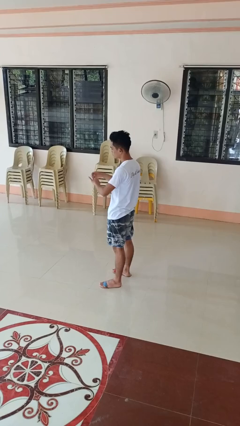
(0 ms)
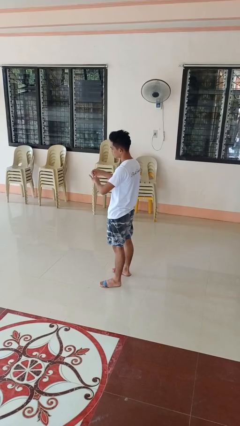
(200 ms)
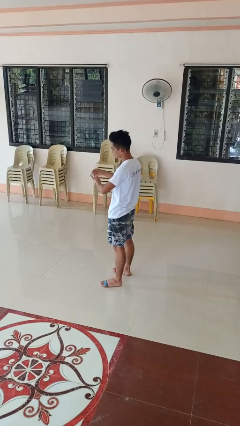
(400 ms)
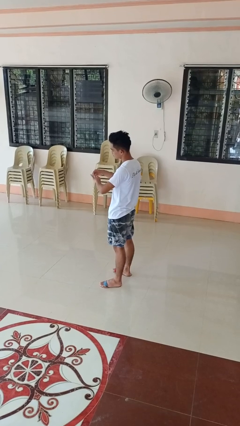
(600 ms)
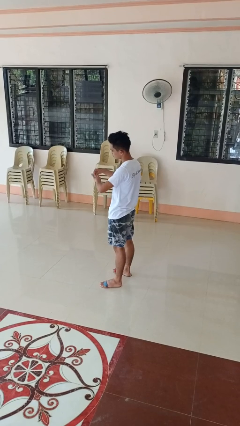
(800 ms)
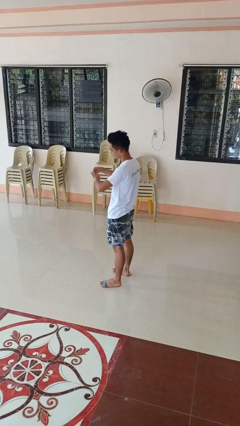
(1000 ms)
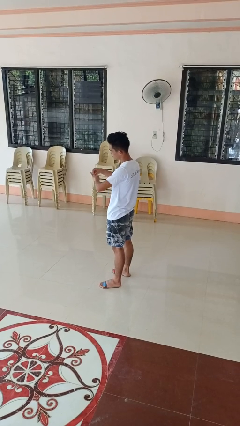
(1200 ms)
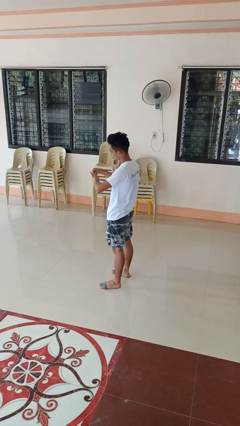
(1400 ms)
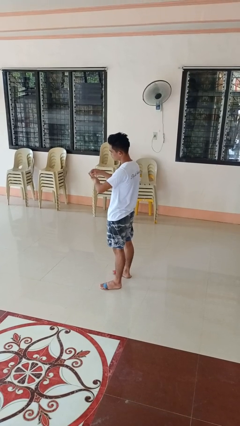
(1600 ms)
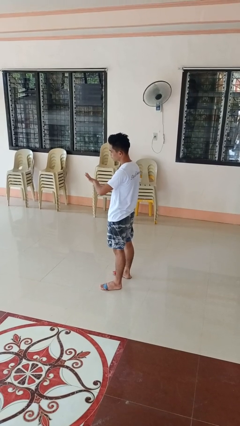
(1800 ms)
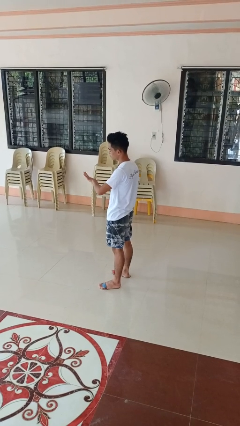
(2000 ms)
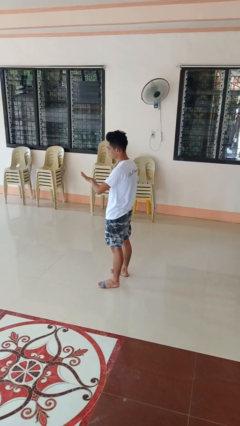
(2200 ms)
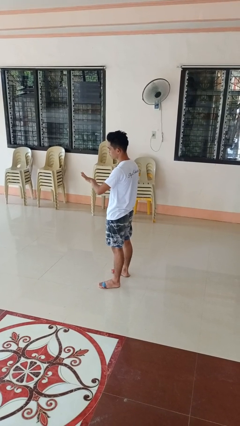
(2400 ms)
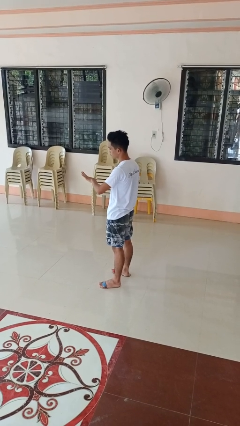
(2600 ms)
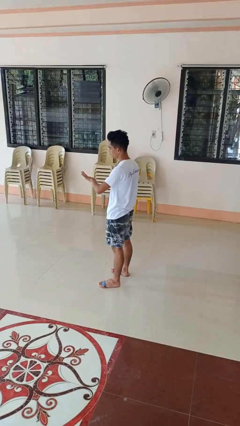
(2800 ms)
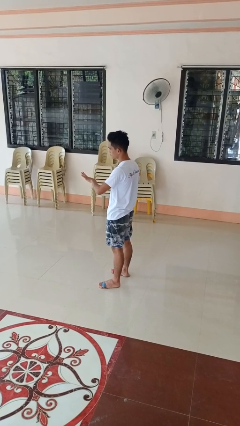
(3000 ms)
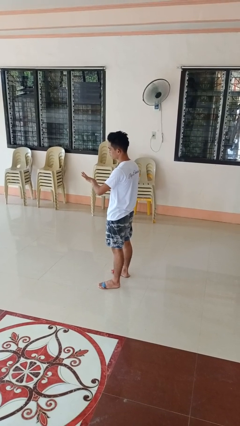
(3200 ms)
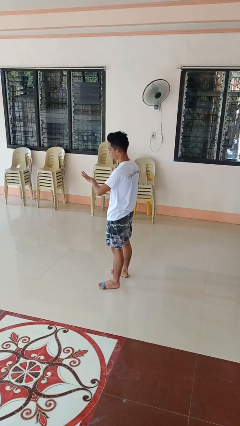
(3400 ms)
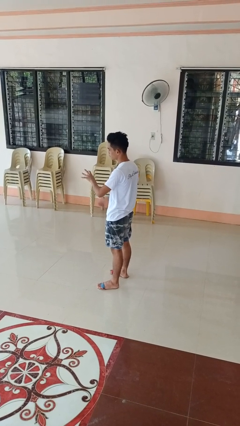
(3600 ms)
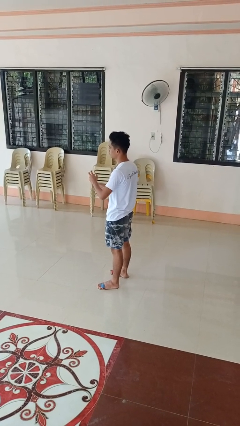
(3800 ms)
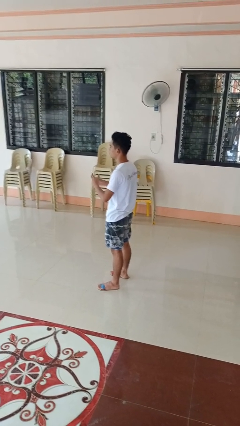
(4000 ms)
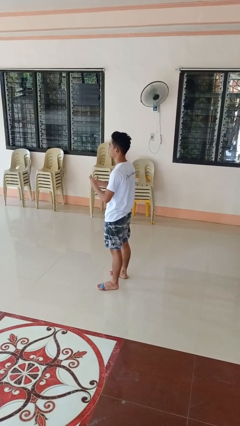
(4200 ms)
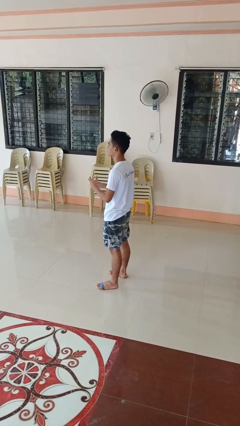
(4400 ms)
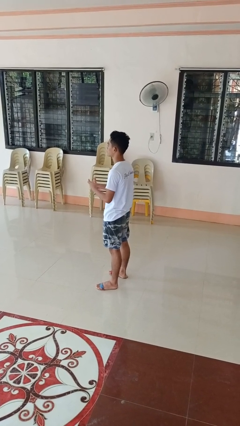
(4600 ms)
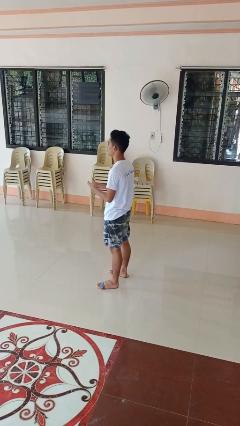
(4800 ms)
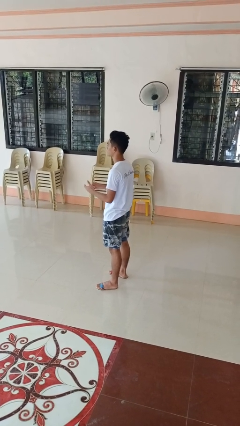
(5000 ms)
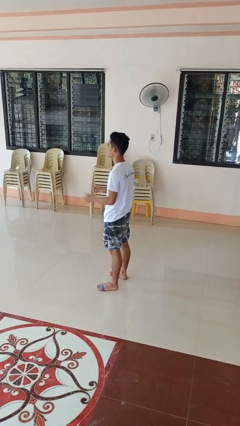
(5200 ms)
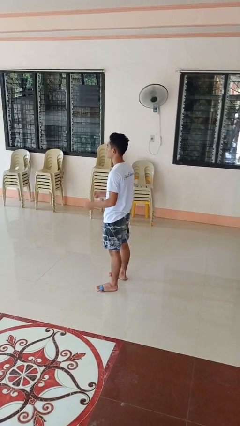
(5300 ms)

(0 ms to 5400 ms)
person puts on ring

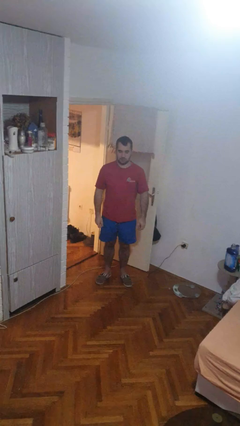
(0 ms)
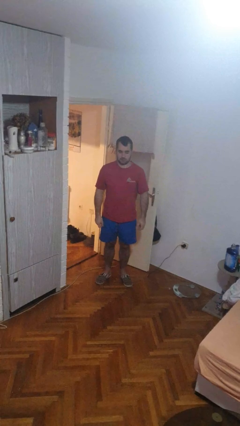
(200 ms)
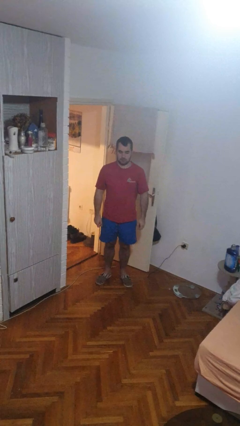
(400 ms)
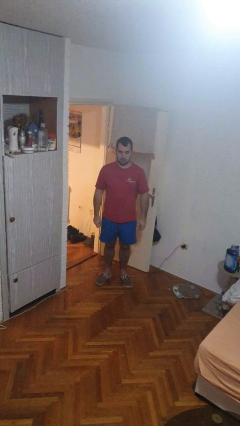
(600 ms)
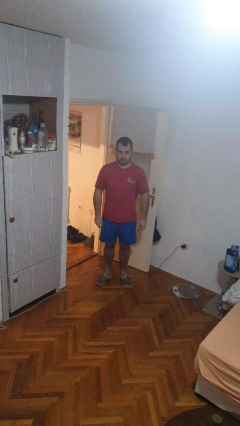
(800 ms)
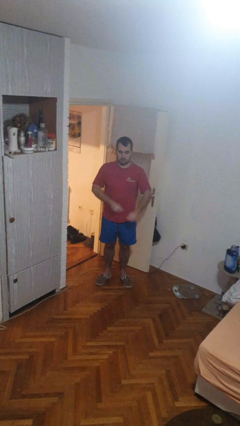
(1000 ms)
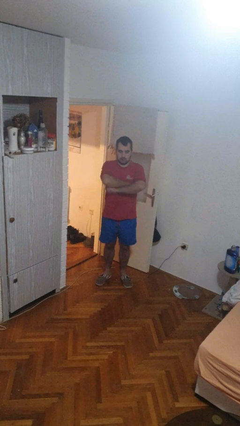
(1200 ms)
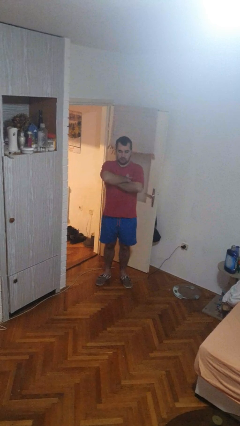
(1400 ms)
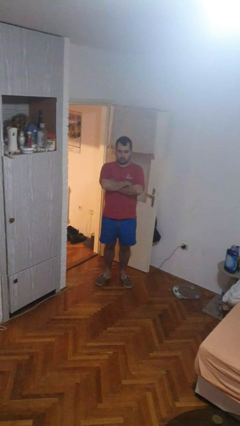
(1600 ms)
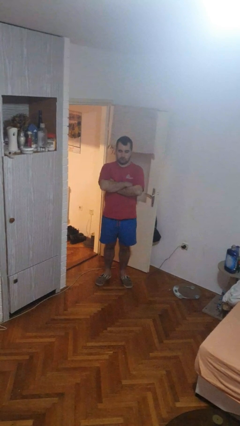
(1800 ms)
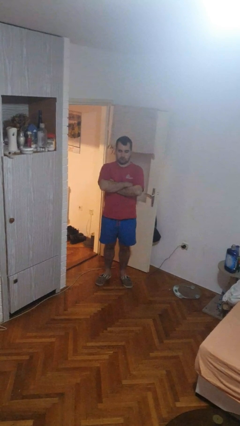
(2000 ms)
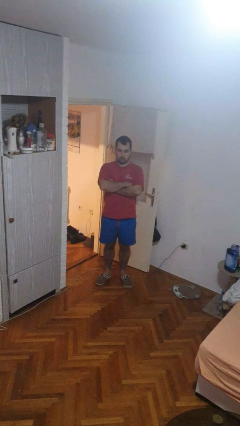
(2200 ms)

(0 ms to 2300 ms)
person crosses arms

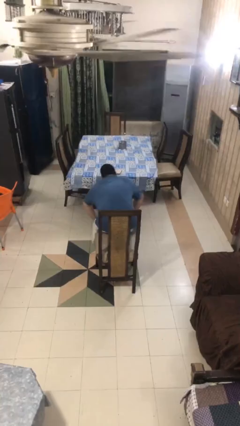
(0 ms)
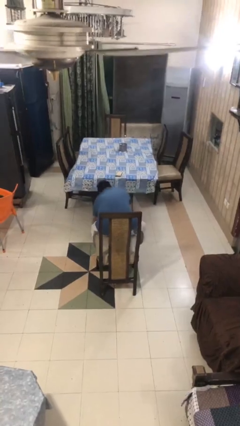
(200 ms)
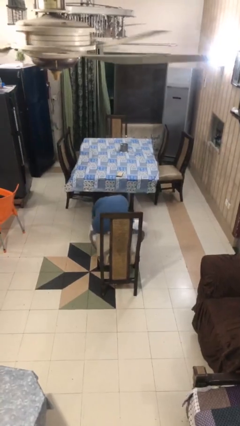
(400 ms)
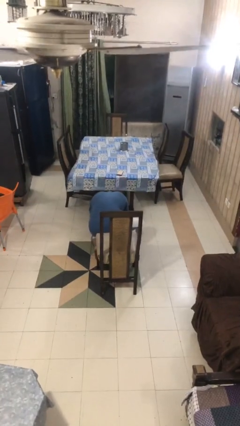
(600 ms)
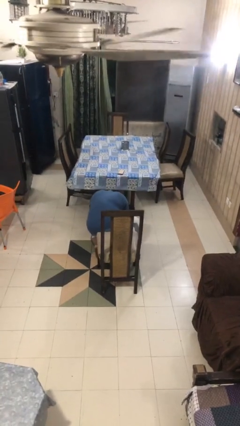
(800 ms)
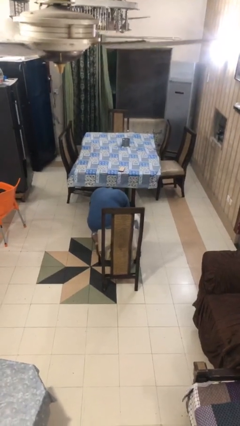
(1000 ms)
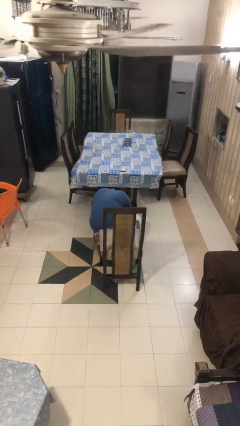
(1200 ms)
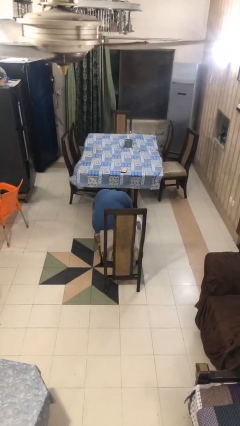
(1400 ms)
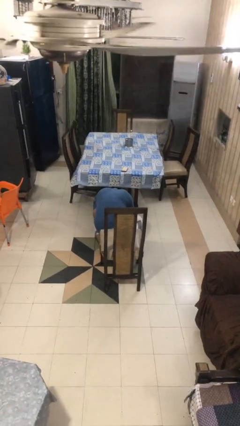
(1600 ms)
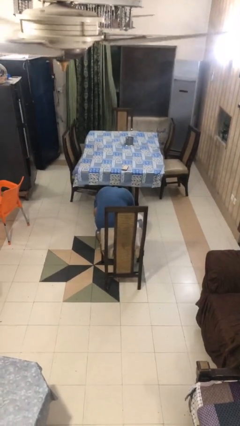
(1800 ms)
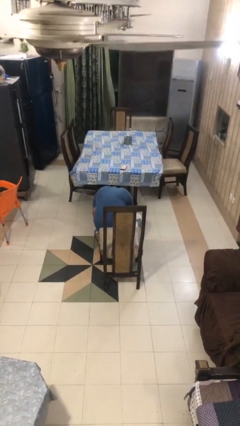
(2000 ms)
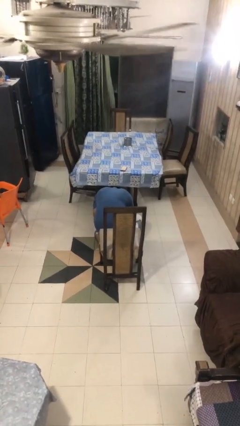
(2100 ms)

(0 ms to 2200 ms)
person falls from chair

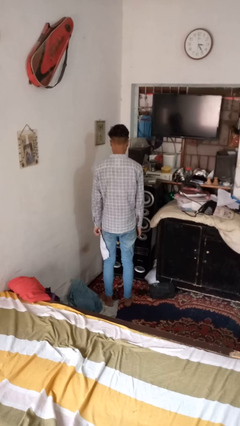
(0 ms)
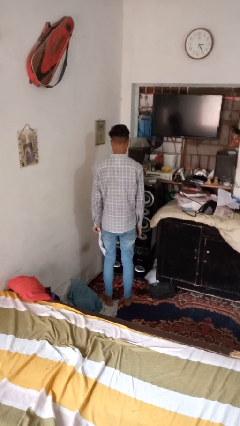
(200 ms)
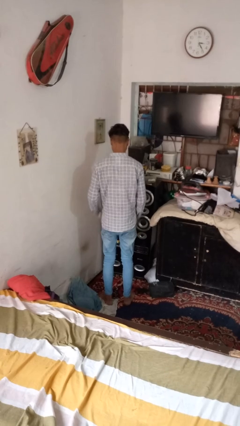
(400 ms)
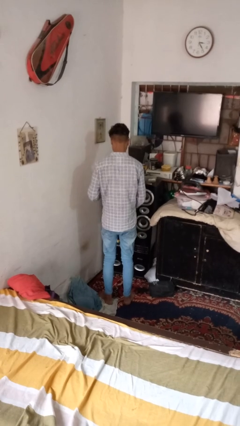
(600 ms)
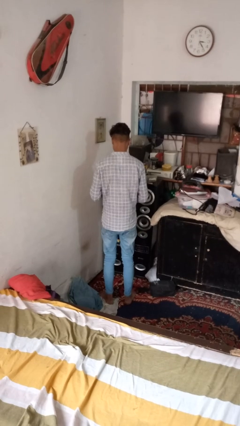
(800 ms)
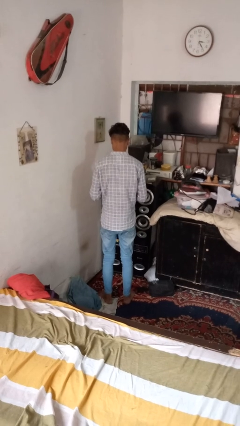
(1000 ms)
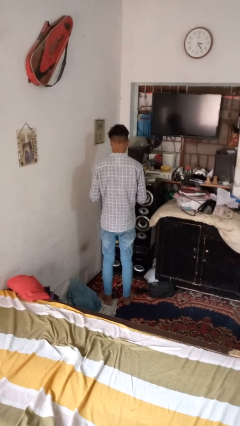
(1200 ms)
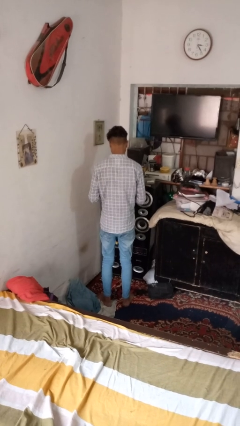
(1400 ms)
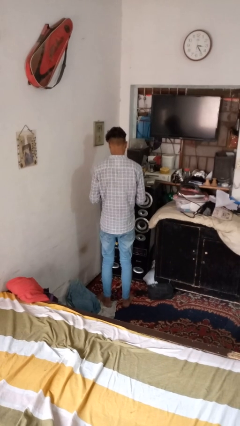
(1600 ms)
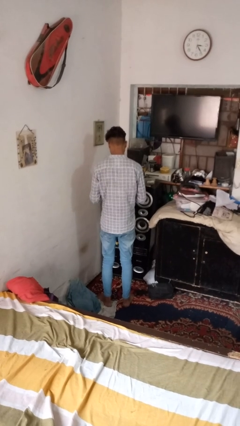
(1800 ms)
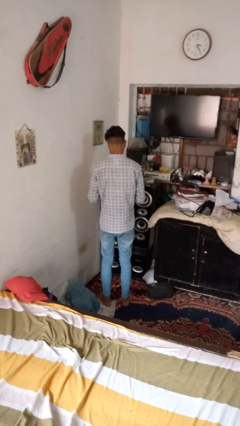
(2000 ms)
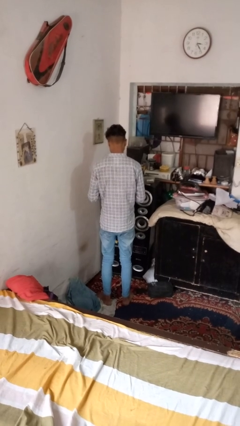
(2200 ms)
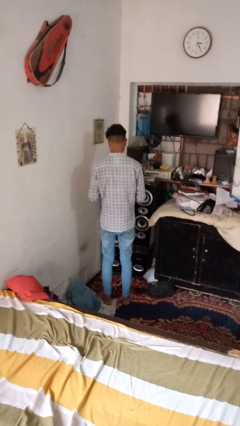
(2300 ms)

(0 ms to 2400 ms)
person crumples paper

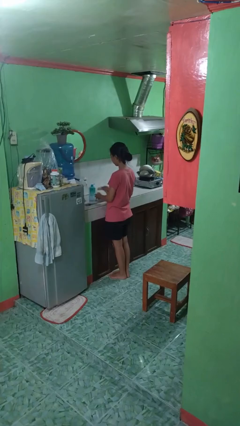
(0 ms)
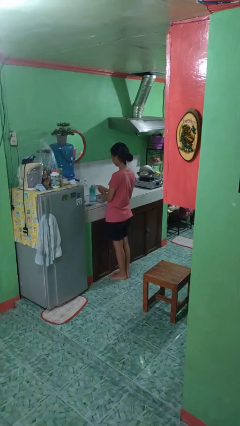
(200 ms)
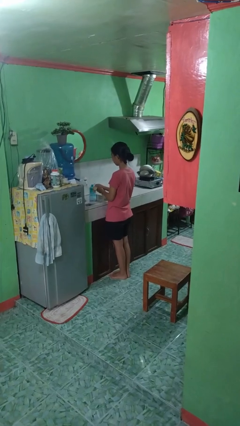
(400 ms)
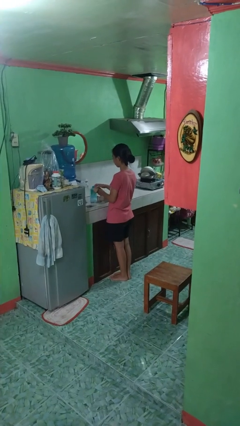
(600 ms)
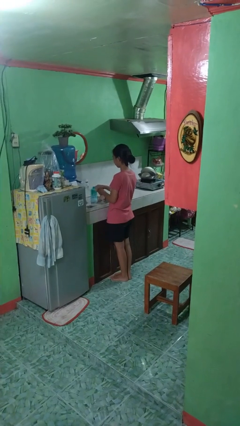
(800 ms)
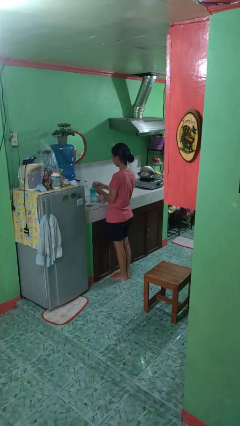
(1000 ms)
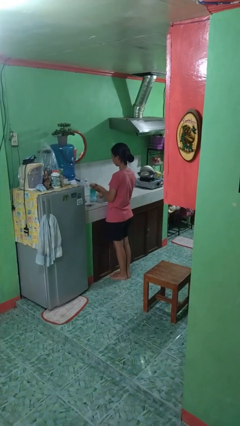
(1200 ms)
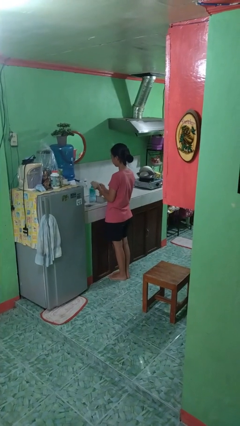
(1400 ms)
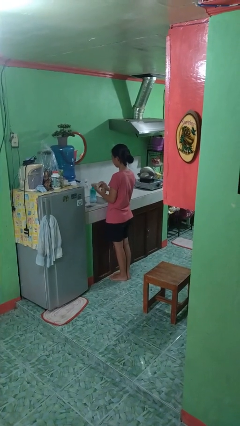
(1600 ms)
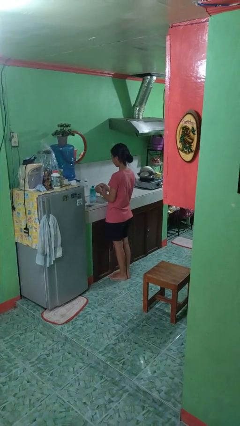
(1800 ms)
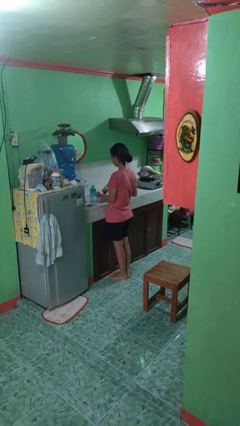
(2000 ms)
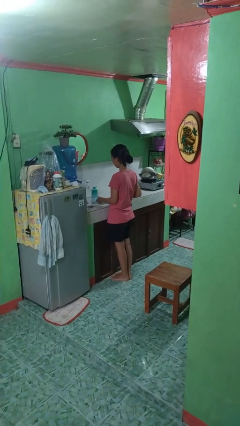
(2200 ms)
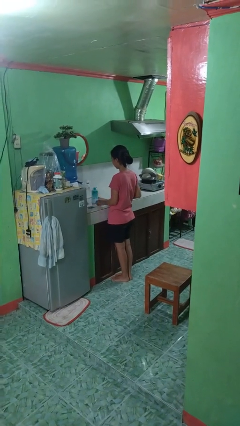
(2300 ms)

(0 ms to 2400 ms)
person dries hands with towel

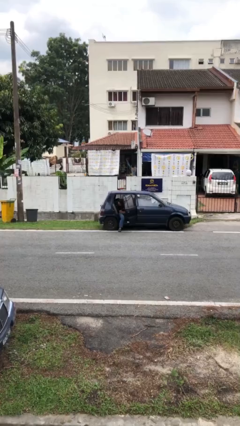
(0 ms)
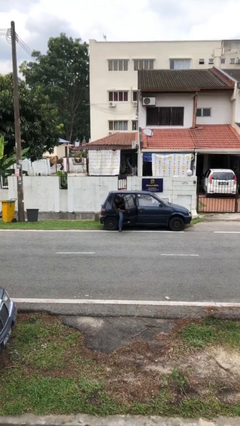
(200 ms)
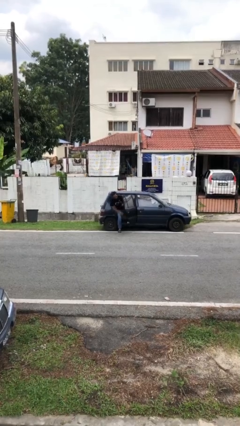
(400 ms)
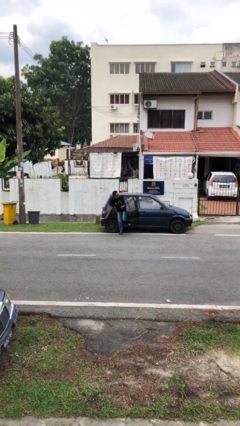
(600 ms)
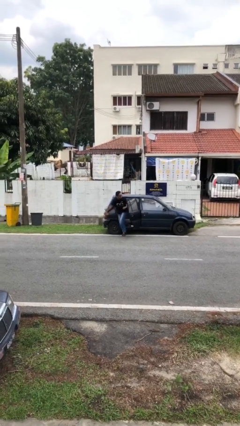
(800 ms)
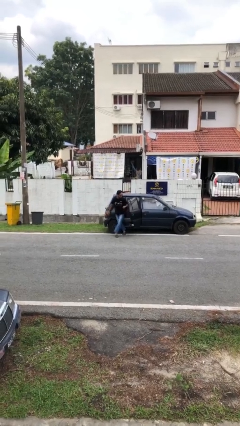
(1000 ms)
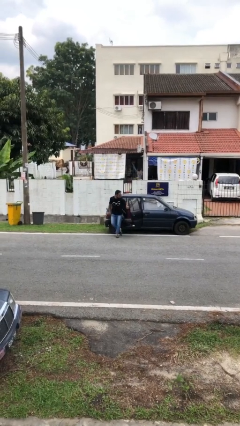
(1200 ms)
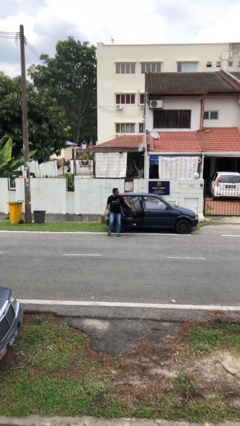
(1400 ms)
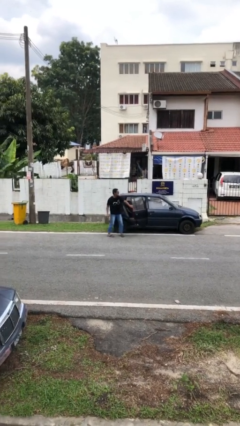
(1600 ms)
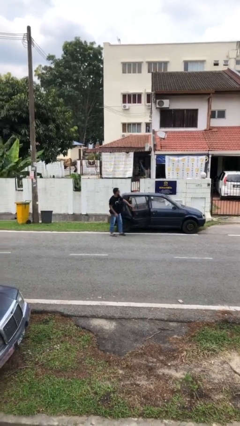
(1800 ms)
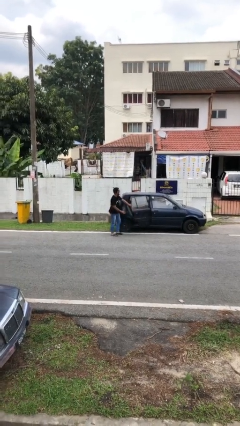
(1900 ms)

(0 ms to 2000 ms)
person exits car

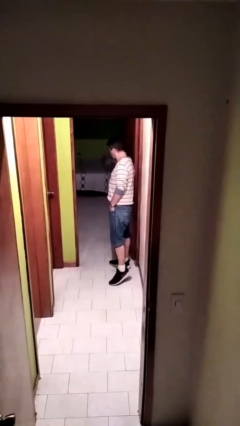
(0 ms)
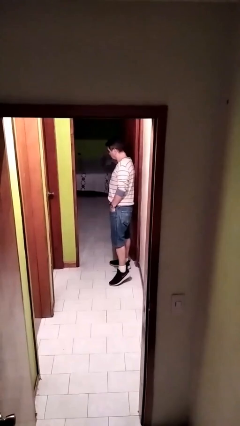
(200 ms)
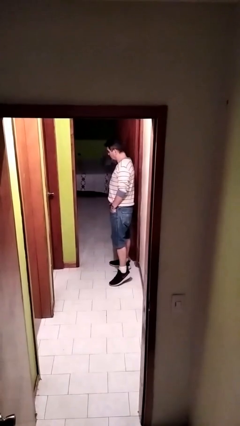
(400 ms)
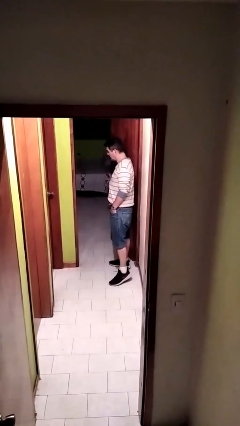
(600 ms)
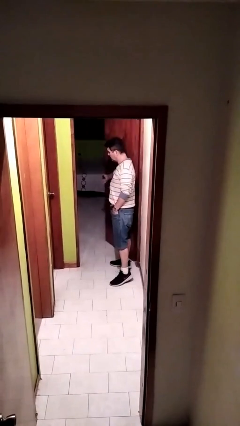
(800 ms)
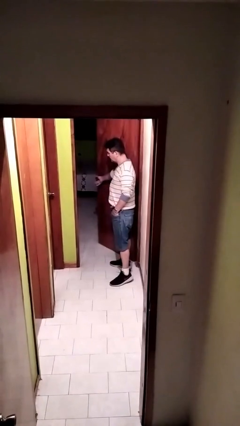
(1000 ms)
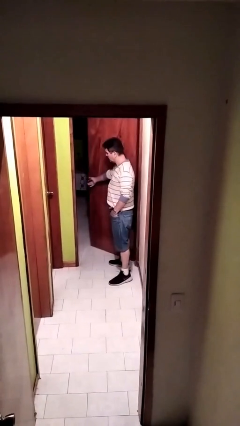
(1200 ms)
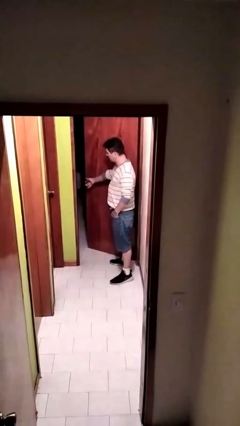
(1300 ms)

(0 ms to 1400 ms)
person closes facility door
